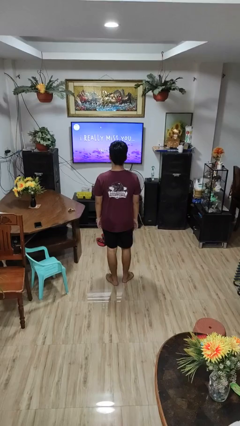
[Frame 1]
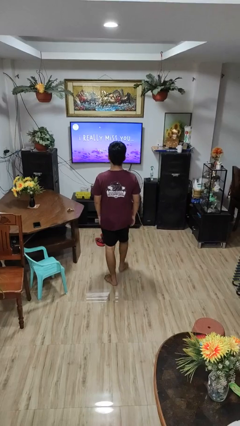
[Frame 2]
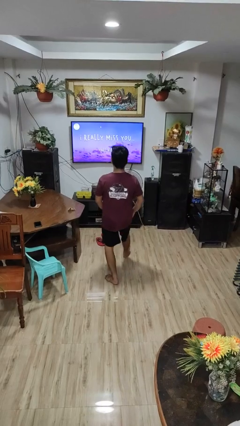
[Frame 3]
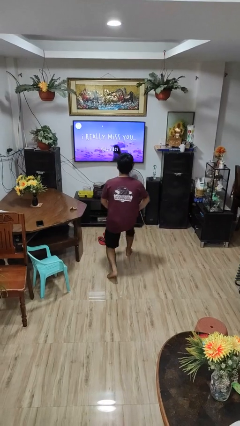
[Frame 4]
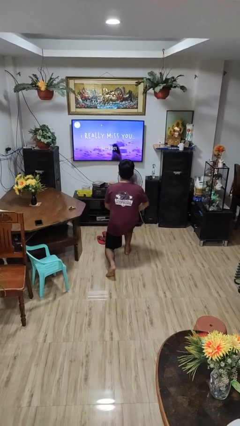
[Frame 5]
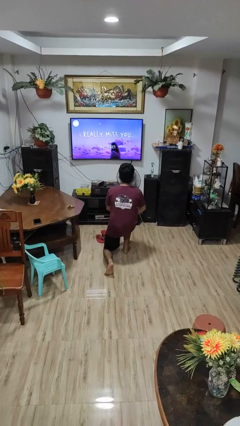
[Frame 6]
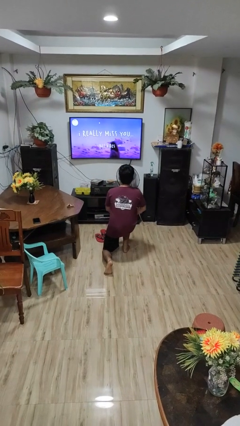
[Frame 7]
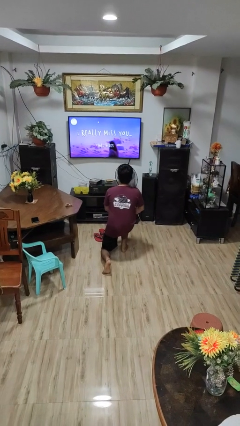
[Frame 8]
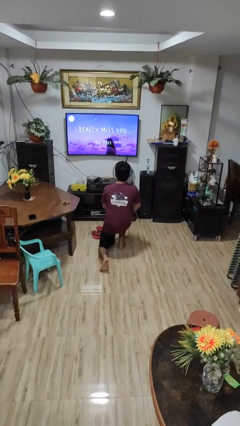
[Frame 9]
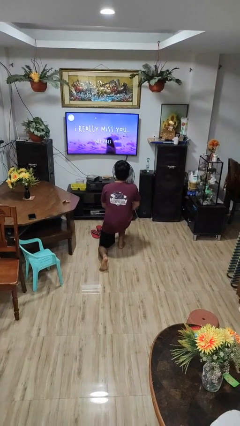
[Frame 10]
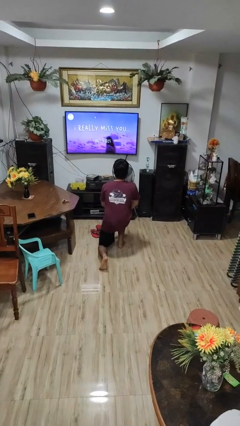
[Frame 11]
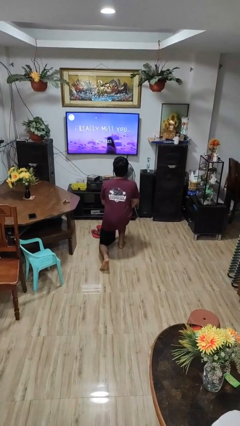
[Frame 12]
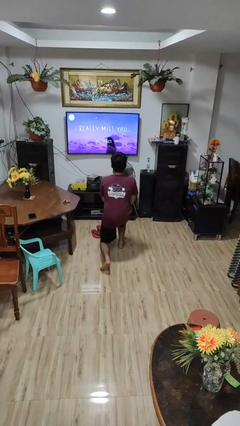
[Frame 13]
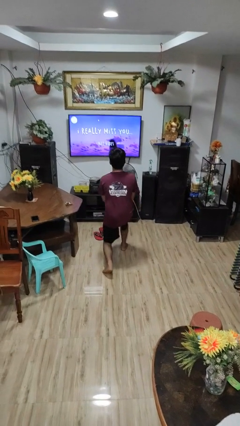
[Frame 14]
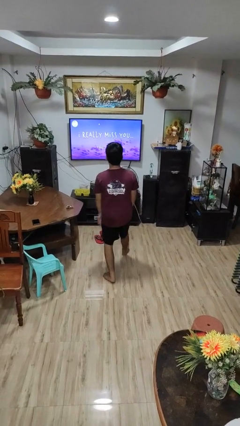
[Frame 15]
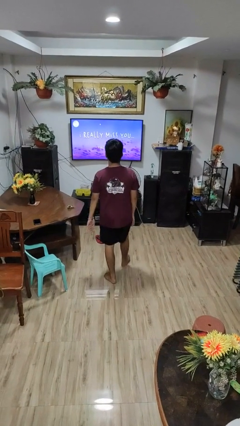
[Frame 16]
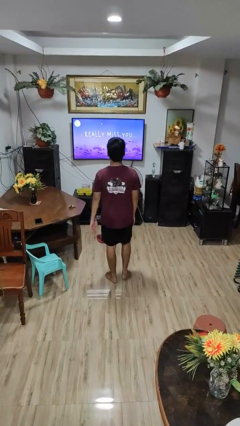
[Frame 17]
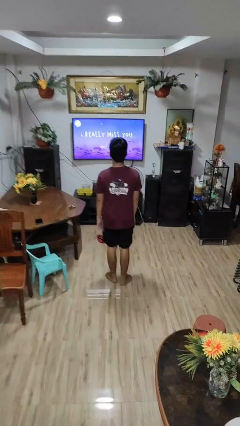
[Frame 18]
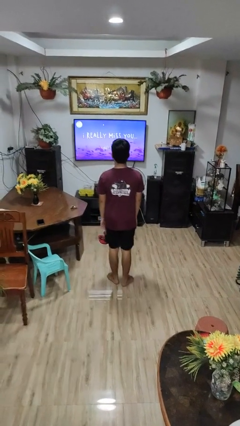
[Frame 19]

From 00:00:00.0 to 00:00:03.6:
person exercises with lunges

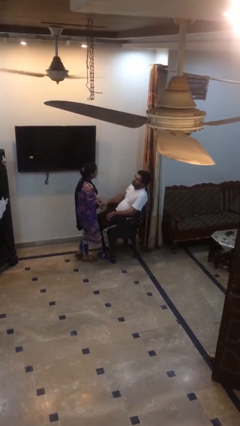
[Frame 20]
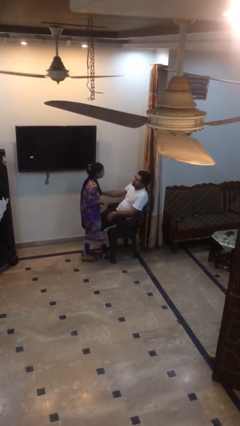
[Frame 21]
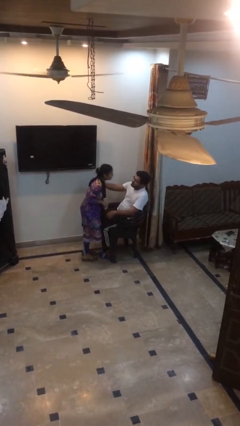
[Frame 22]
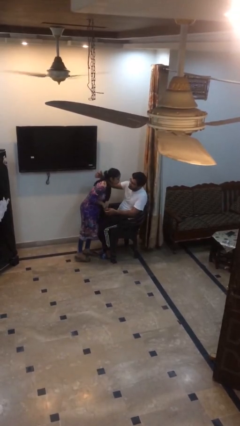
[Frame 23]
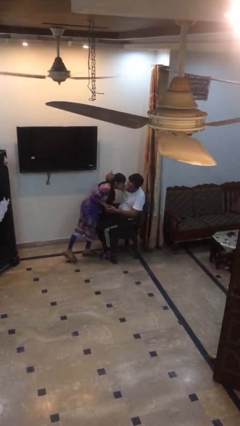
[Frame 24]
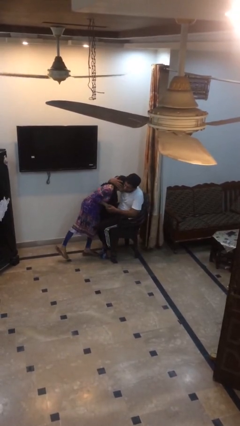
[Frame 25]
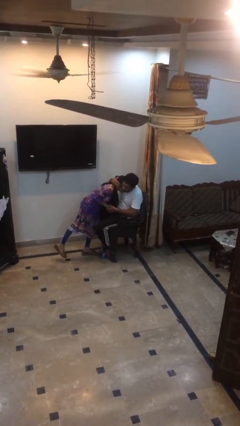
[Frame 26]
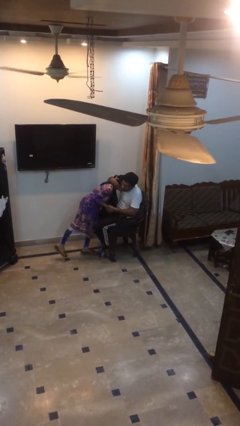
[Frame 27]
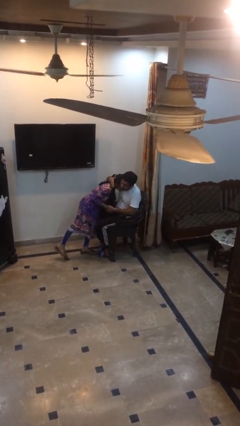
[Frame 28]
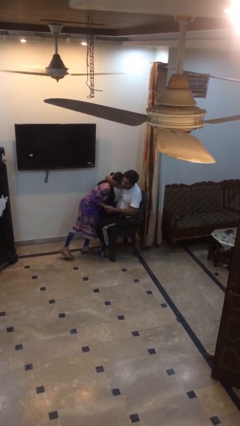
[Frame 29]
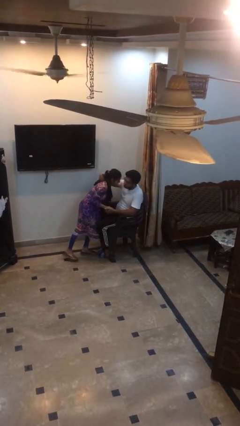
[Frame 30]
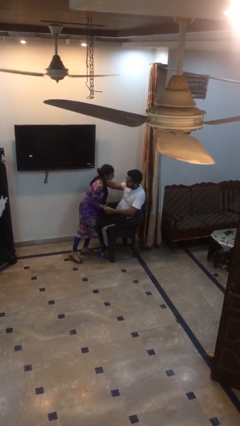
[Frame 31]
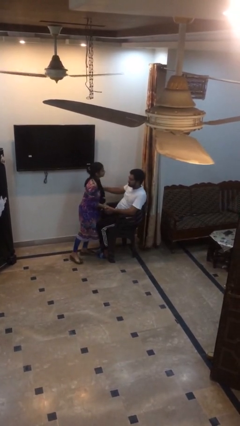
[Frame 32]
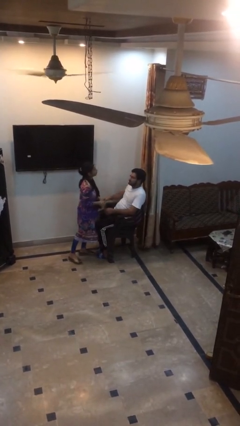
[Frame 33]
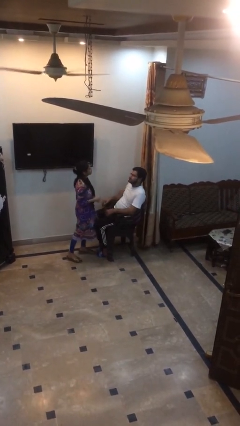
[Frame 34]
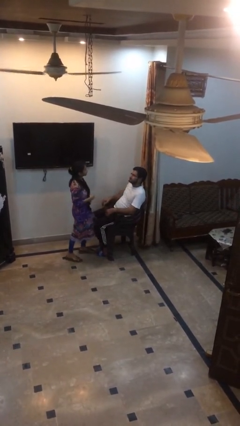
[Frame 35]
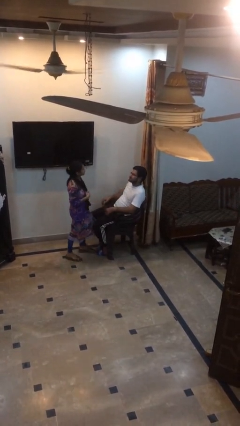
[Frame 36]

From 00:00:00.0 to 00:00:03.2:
person embraces person

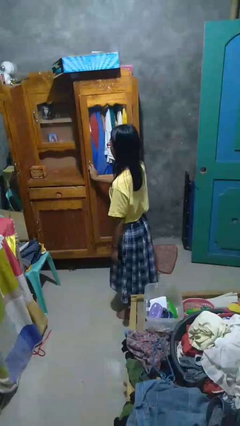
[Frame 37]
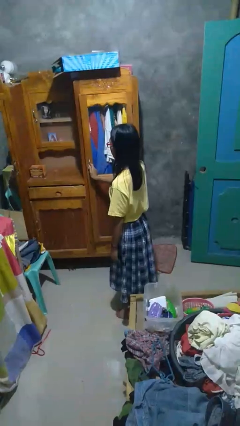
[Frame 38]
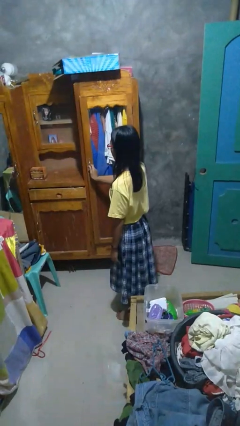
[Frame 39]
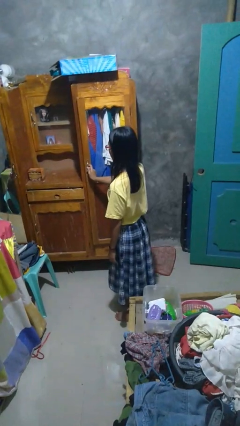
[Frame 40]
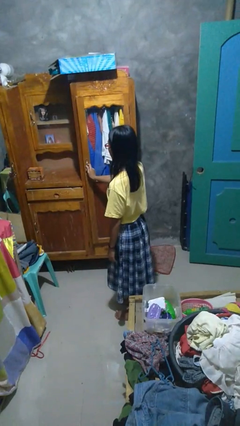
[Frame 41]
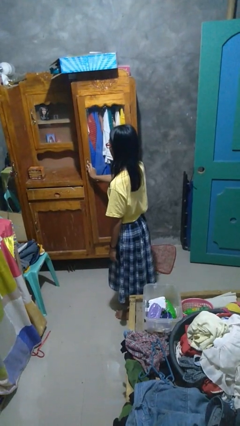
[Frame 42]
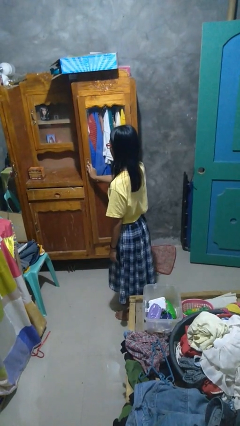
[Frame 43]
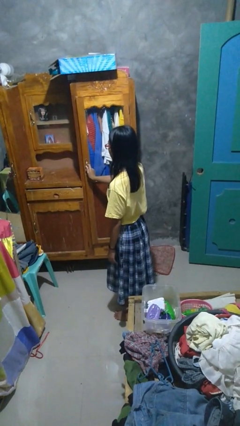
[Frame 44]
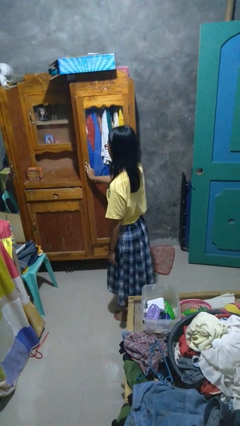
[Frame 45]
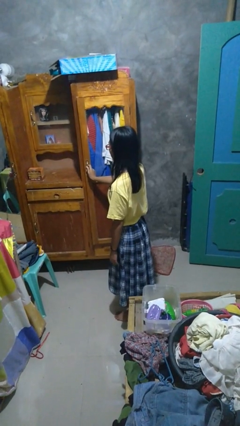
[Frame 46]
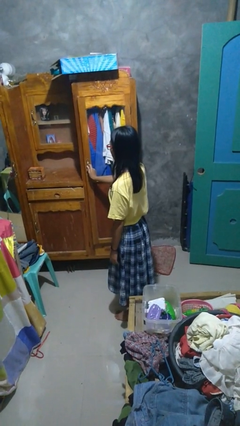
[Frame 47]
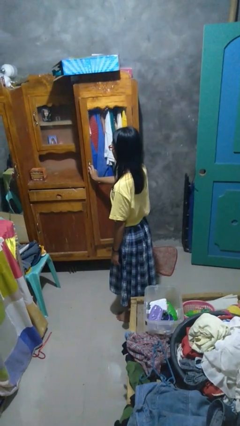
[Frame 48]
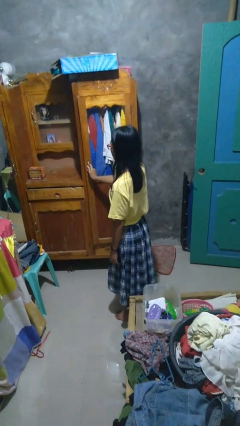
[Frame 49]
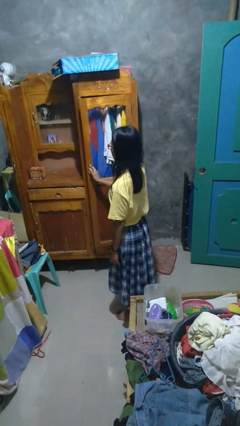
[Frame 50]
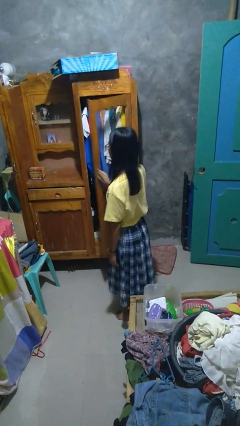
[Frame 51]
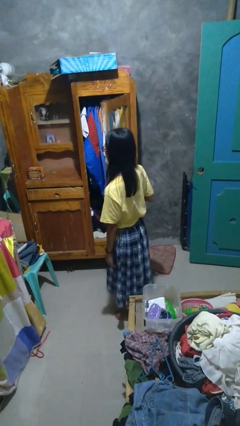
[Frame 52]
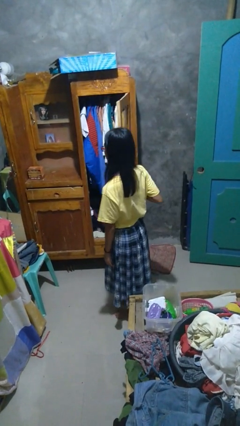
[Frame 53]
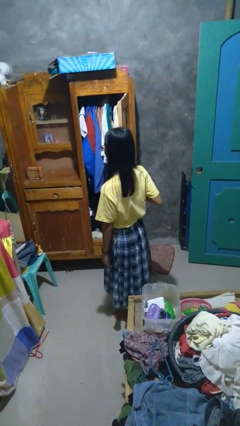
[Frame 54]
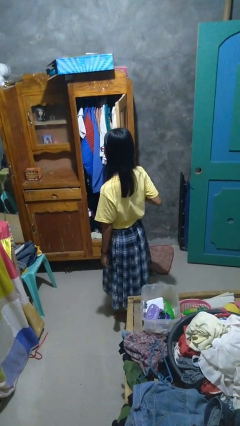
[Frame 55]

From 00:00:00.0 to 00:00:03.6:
person opens closet door

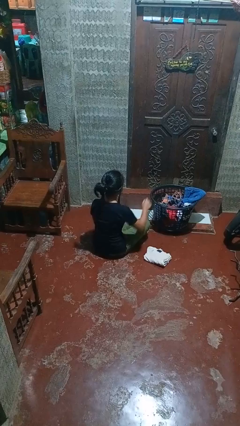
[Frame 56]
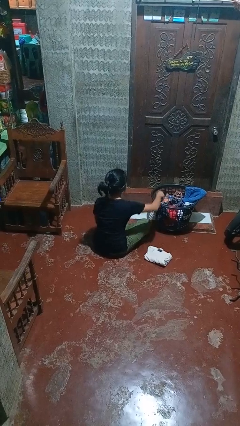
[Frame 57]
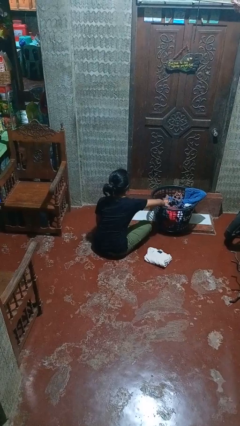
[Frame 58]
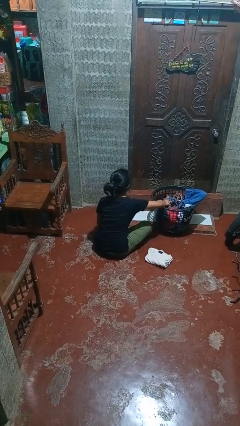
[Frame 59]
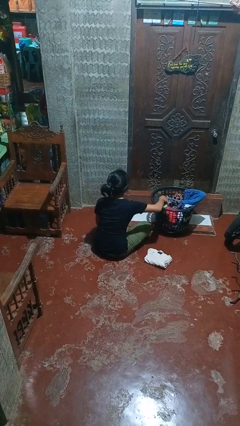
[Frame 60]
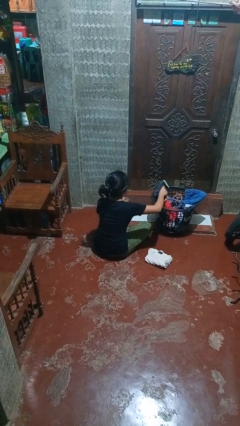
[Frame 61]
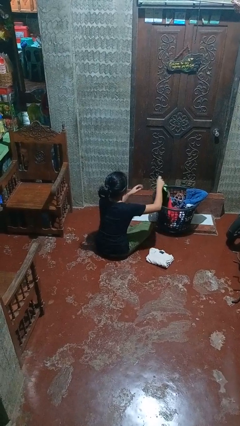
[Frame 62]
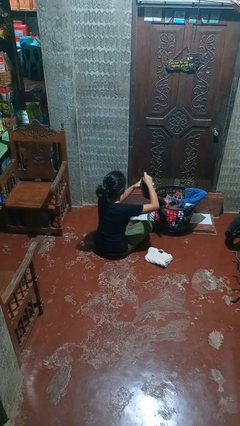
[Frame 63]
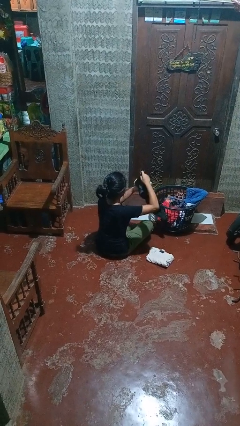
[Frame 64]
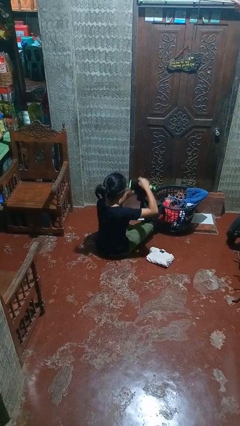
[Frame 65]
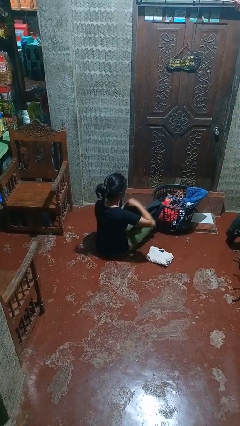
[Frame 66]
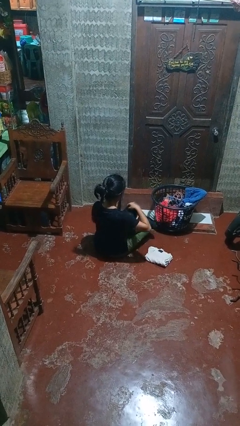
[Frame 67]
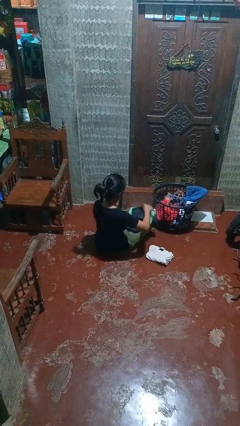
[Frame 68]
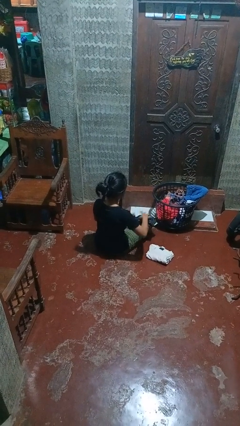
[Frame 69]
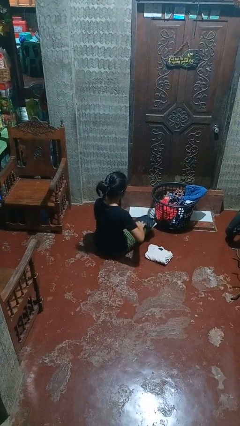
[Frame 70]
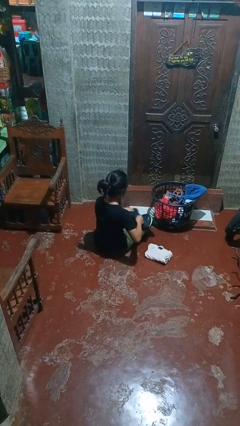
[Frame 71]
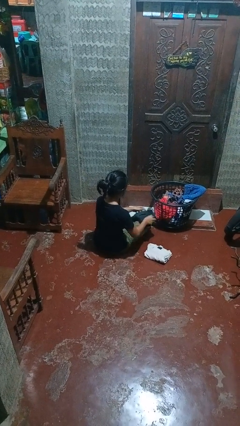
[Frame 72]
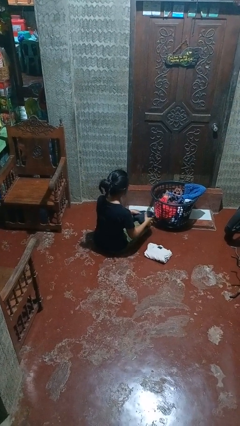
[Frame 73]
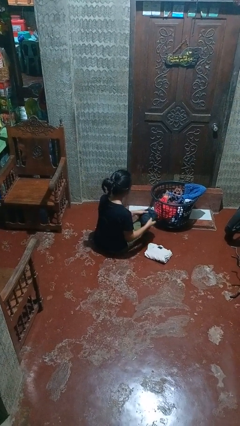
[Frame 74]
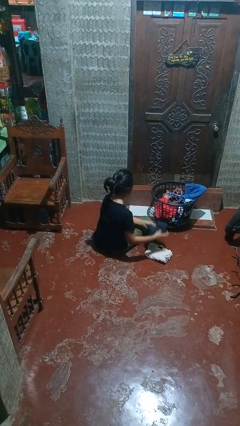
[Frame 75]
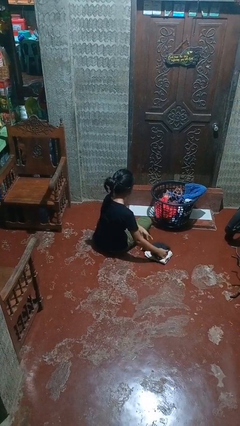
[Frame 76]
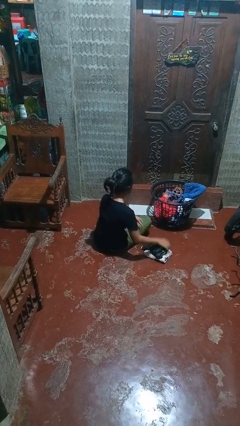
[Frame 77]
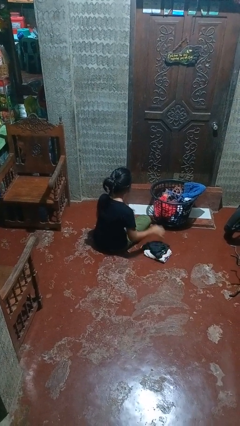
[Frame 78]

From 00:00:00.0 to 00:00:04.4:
person folds shirt

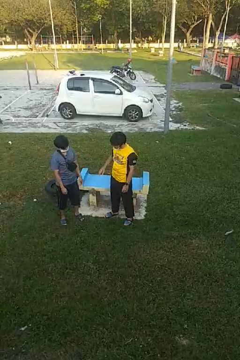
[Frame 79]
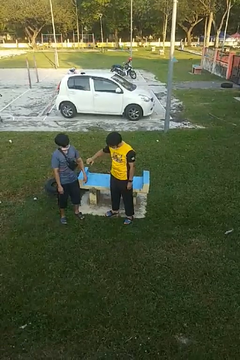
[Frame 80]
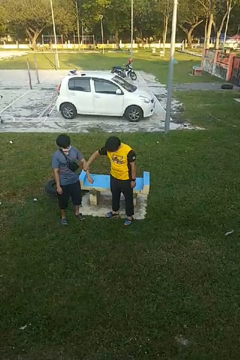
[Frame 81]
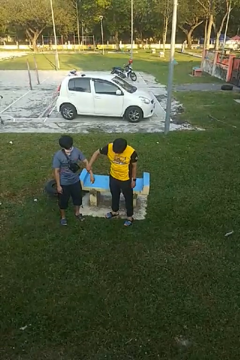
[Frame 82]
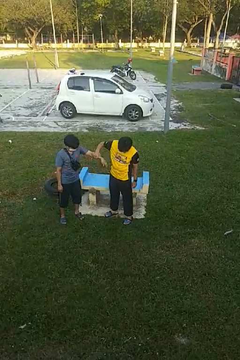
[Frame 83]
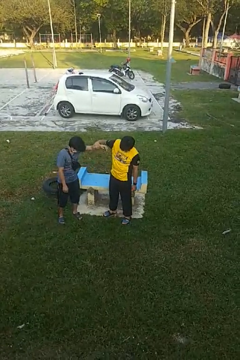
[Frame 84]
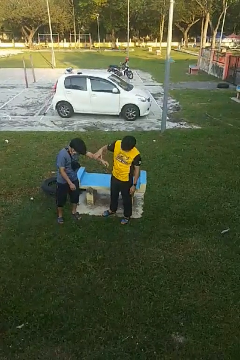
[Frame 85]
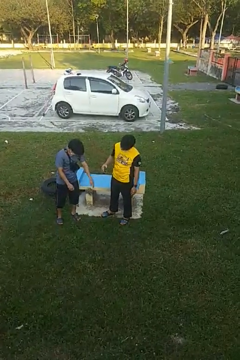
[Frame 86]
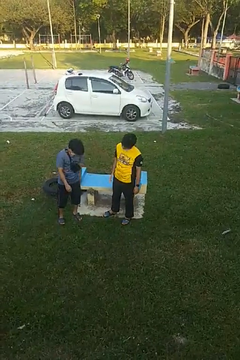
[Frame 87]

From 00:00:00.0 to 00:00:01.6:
person grabs person by forearm

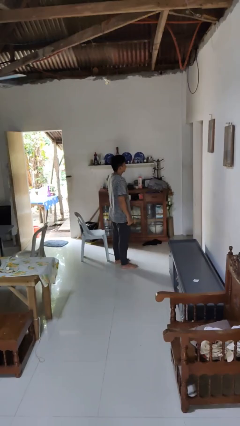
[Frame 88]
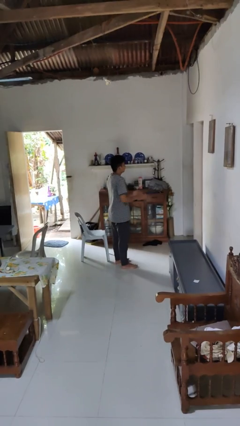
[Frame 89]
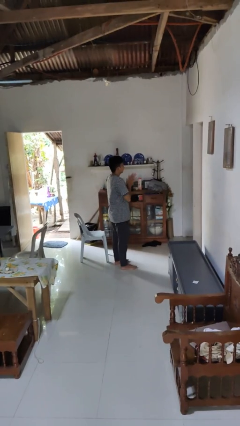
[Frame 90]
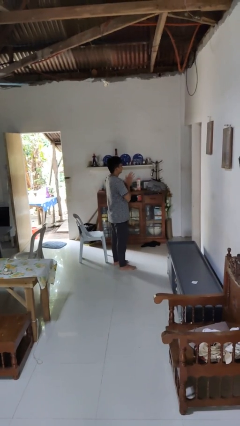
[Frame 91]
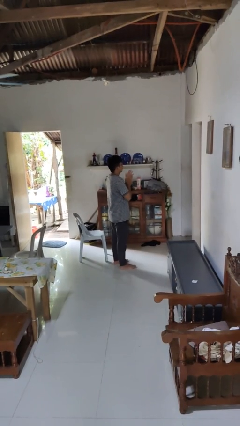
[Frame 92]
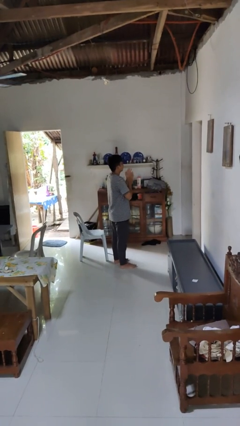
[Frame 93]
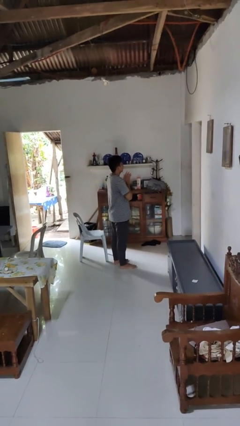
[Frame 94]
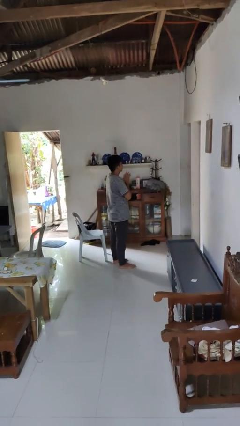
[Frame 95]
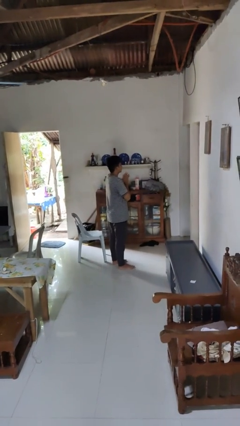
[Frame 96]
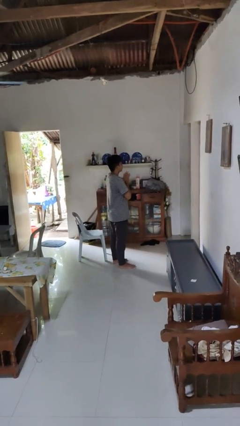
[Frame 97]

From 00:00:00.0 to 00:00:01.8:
person claps hands
